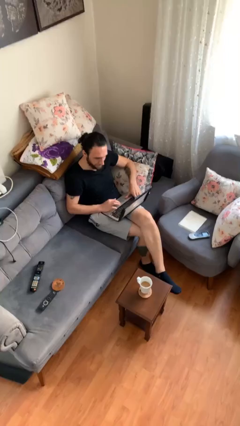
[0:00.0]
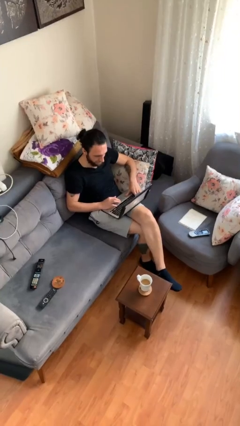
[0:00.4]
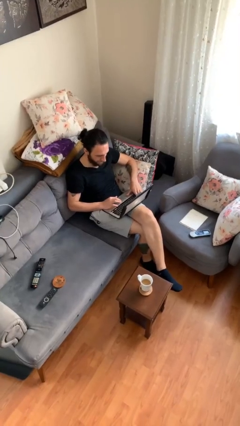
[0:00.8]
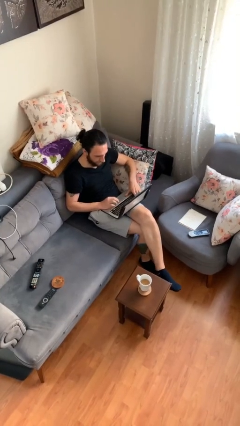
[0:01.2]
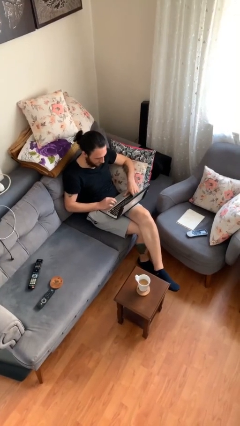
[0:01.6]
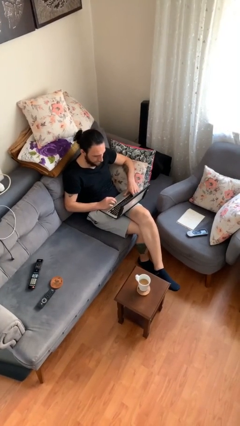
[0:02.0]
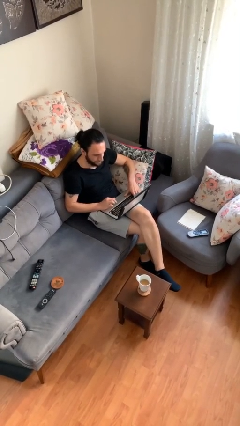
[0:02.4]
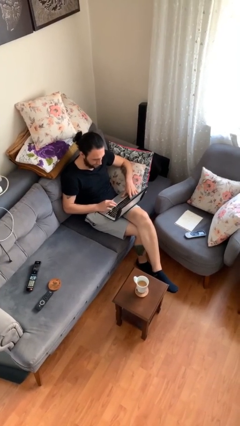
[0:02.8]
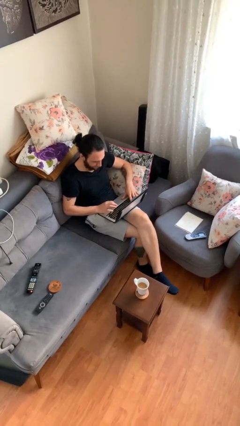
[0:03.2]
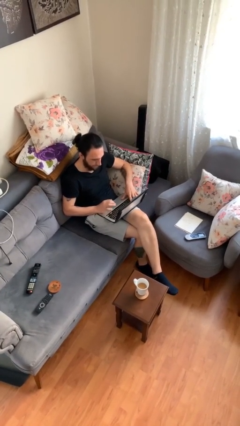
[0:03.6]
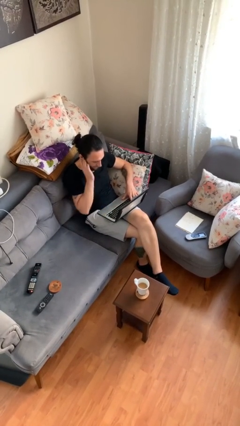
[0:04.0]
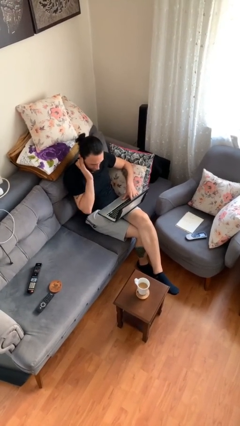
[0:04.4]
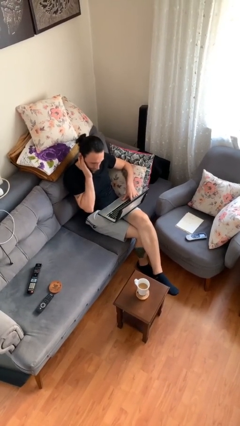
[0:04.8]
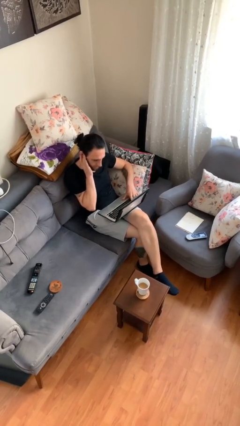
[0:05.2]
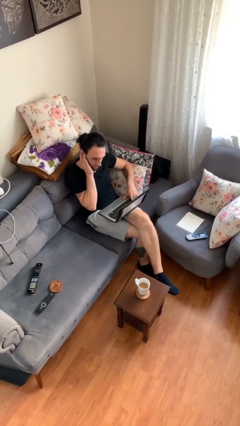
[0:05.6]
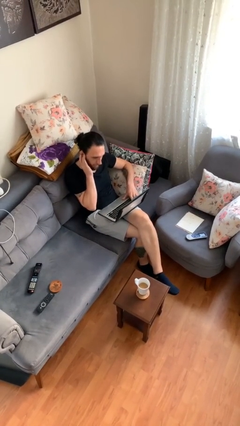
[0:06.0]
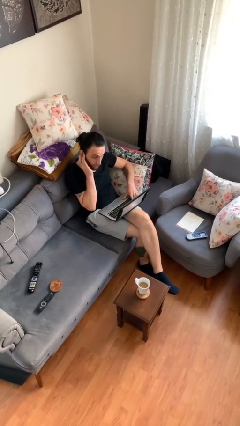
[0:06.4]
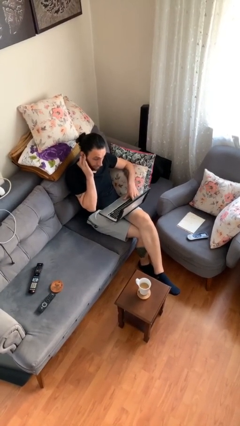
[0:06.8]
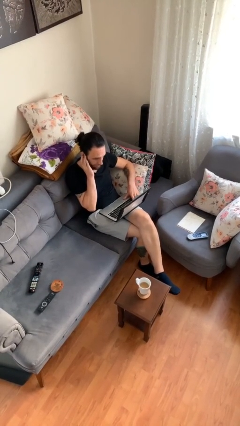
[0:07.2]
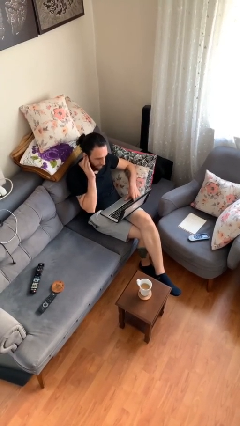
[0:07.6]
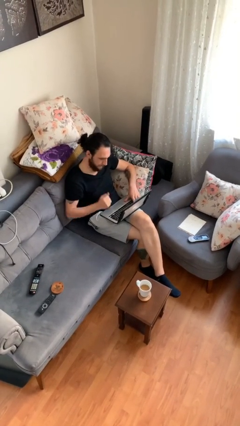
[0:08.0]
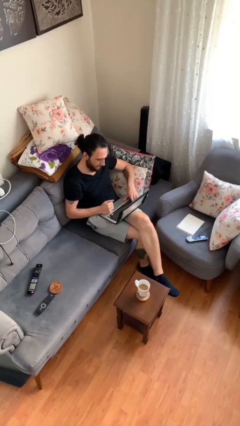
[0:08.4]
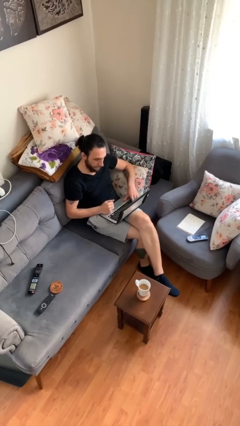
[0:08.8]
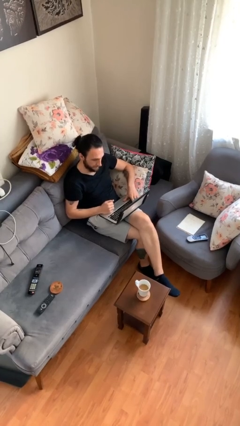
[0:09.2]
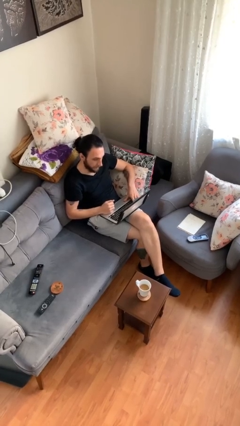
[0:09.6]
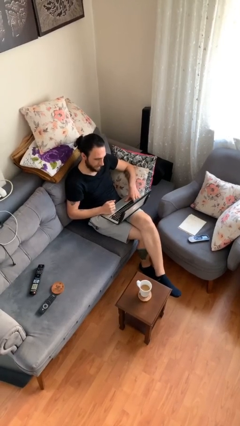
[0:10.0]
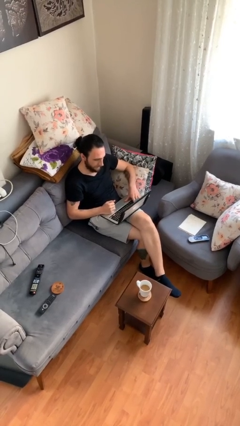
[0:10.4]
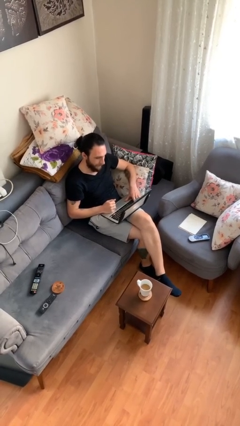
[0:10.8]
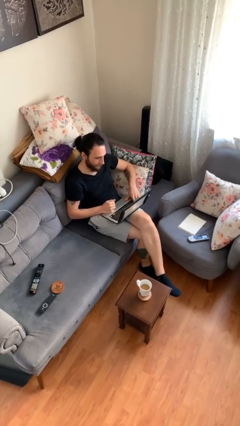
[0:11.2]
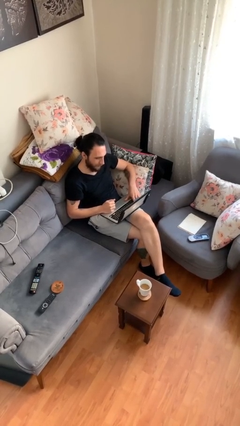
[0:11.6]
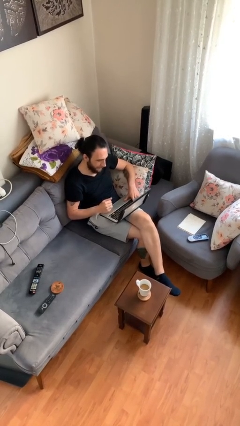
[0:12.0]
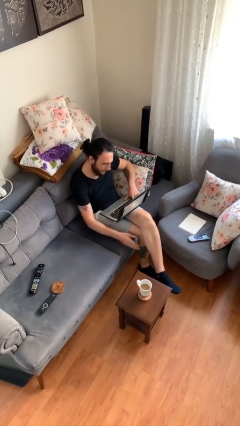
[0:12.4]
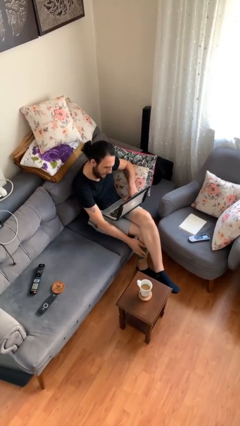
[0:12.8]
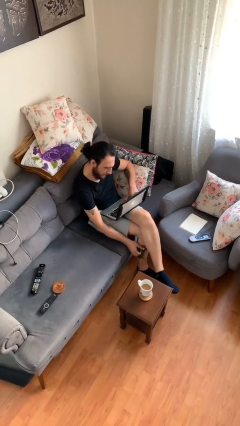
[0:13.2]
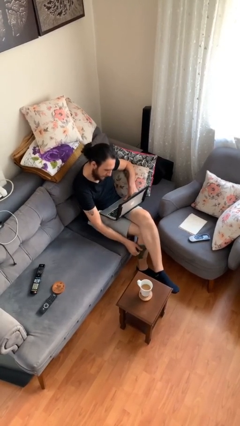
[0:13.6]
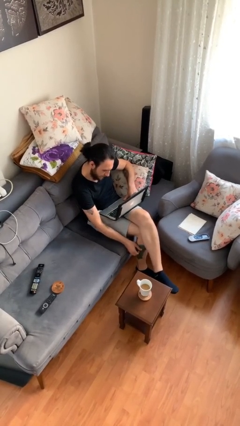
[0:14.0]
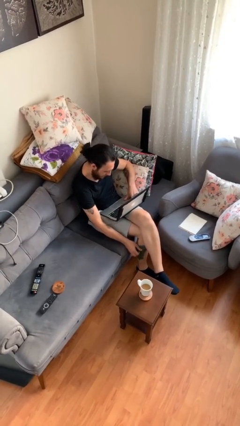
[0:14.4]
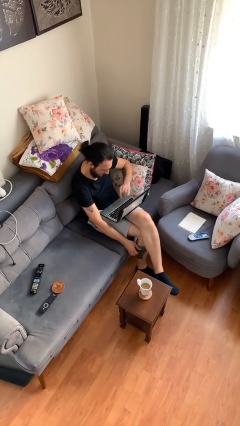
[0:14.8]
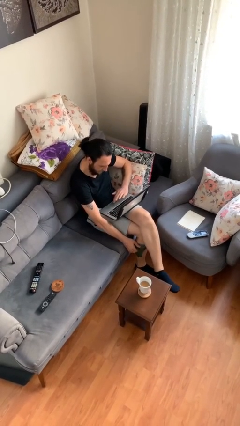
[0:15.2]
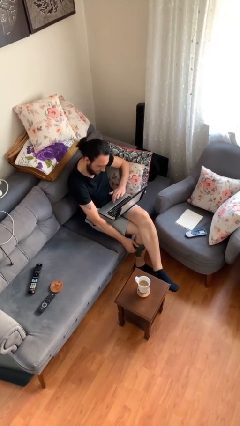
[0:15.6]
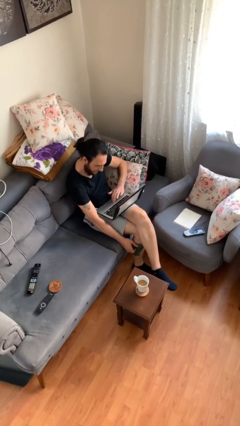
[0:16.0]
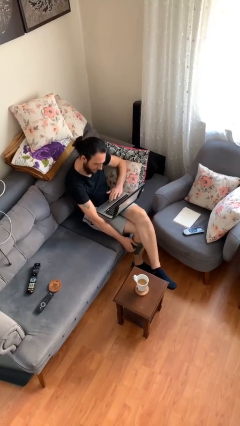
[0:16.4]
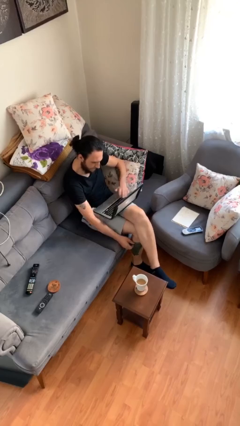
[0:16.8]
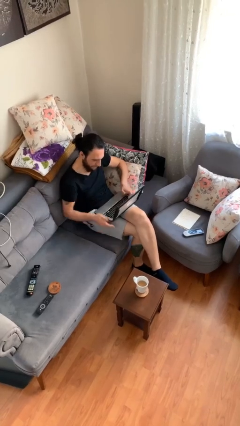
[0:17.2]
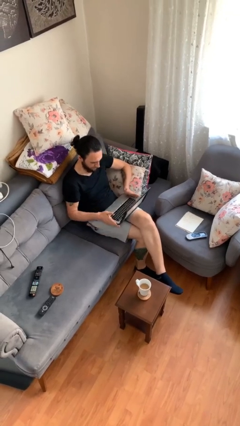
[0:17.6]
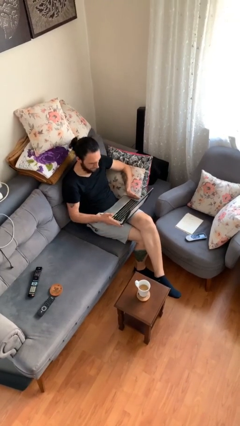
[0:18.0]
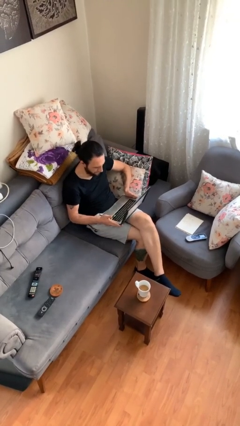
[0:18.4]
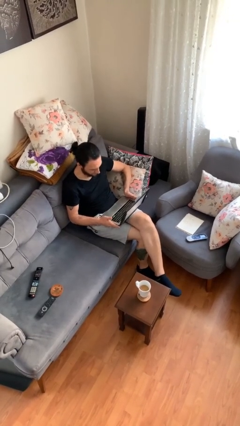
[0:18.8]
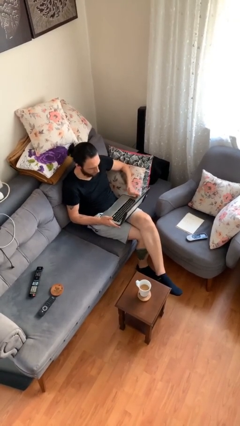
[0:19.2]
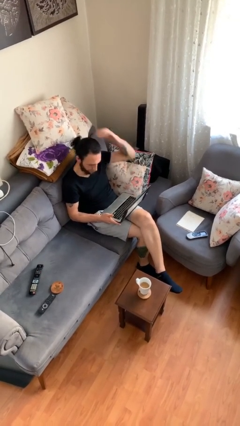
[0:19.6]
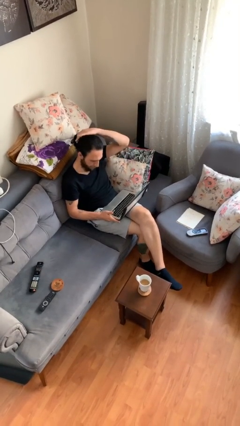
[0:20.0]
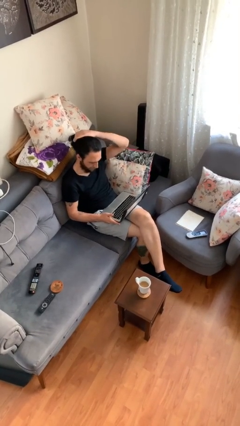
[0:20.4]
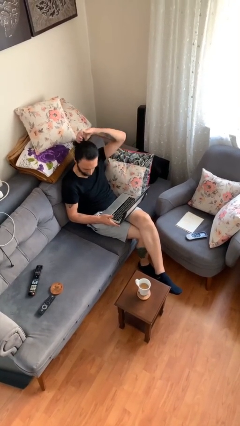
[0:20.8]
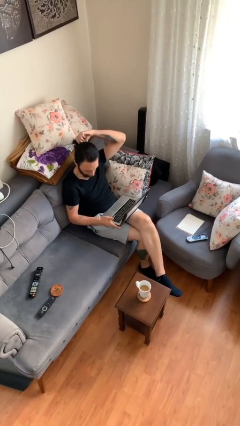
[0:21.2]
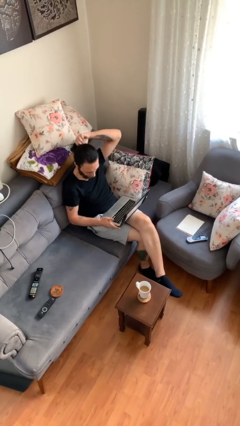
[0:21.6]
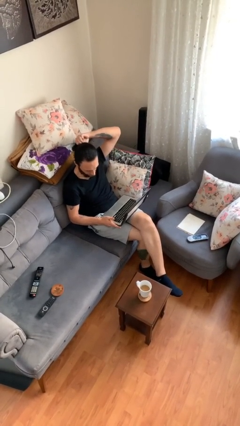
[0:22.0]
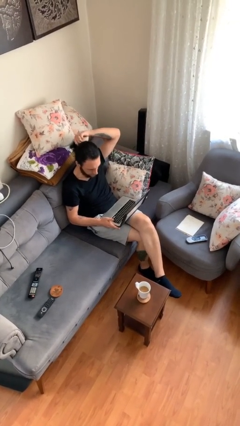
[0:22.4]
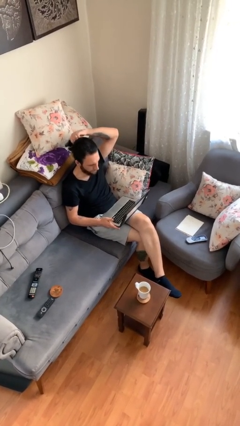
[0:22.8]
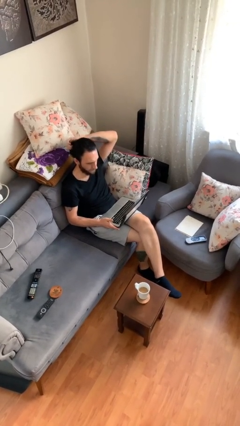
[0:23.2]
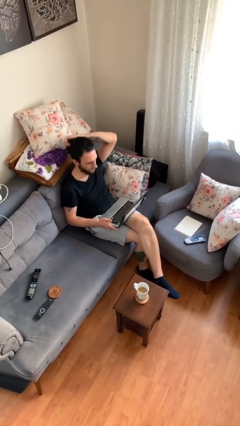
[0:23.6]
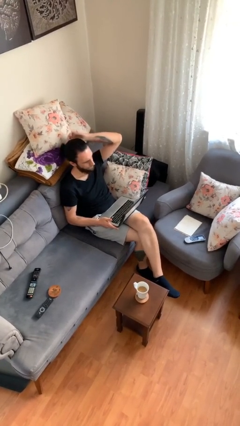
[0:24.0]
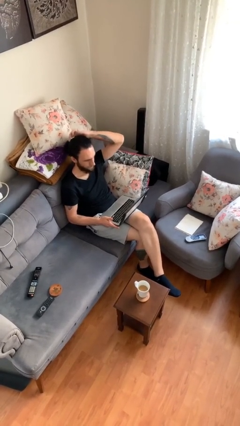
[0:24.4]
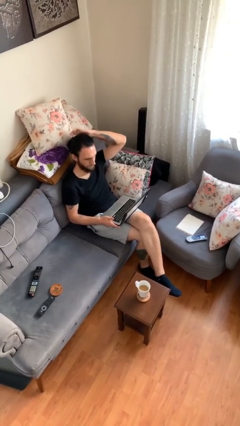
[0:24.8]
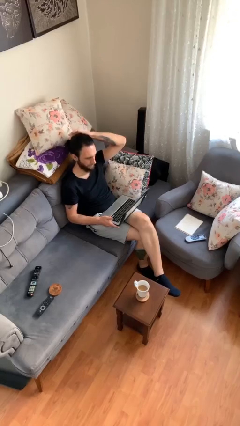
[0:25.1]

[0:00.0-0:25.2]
person interacts with laptop

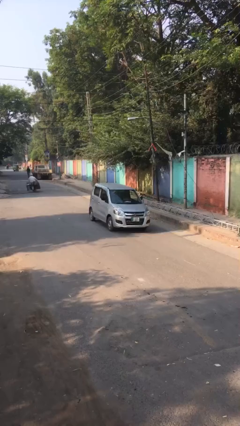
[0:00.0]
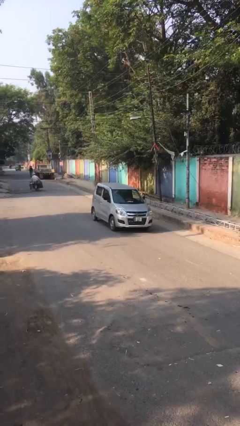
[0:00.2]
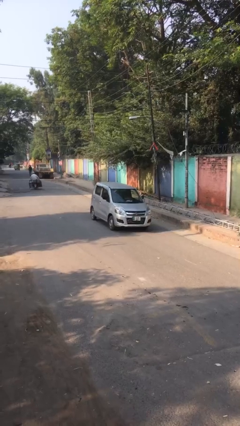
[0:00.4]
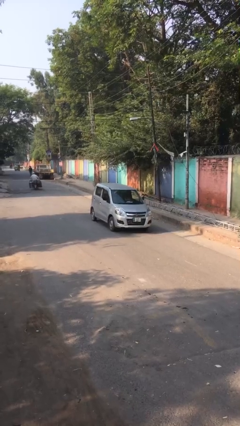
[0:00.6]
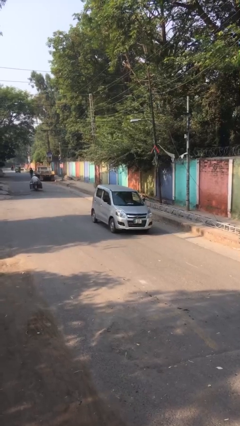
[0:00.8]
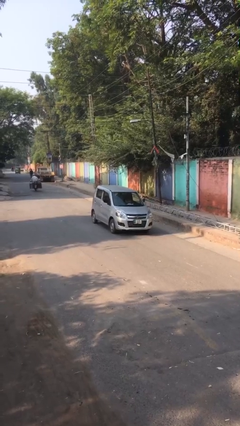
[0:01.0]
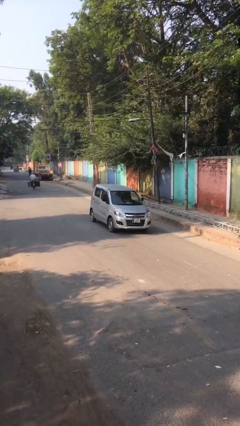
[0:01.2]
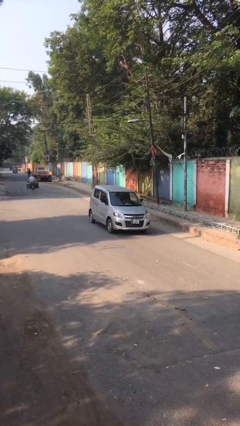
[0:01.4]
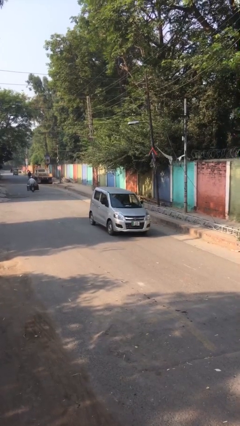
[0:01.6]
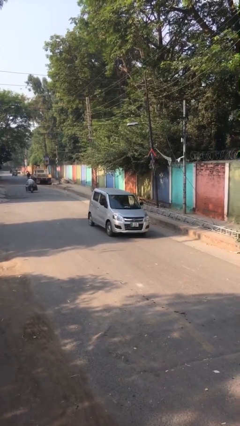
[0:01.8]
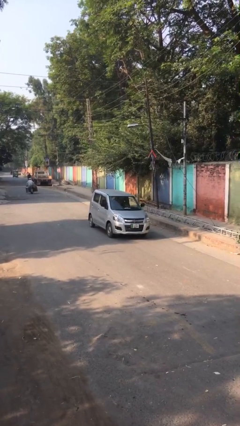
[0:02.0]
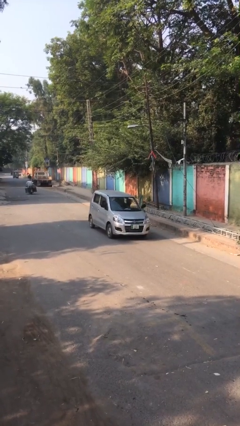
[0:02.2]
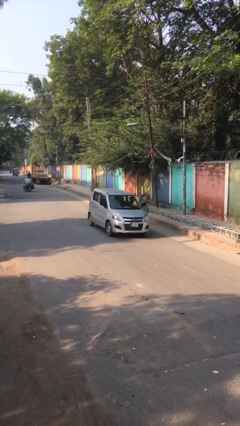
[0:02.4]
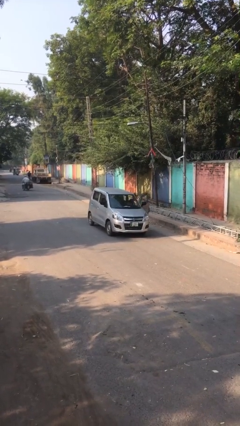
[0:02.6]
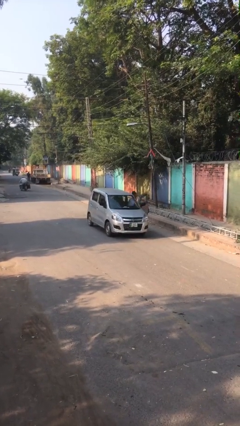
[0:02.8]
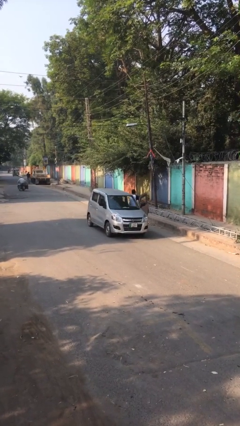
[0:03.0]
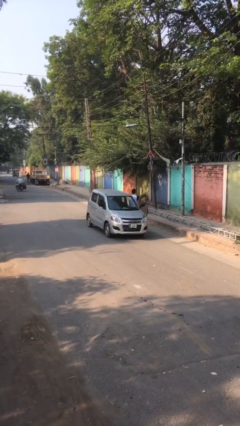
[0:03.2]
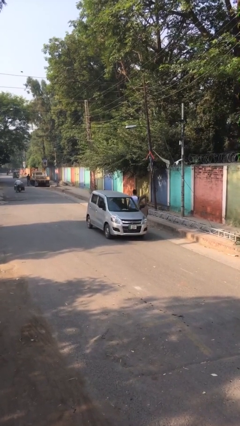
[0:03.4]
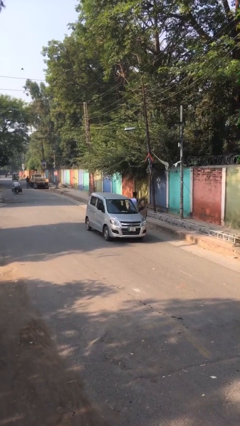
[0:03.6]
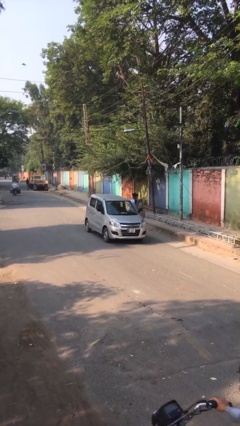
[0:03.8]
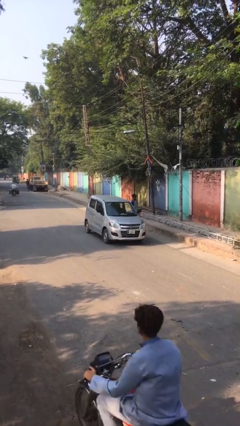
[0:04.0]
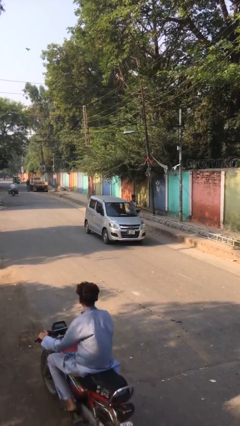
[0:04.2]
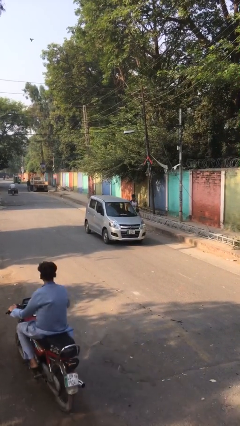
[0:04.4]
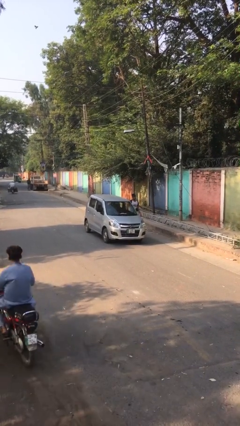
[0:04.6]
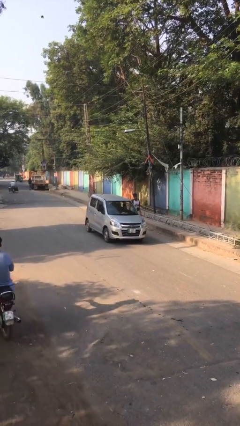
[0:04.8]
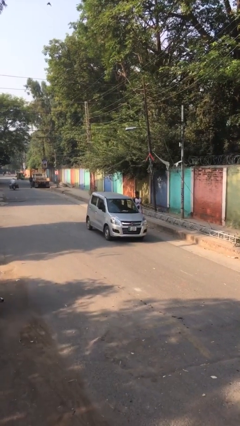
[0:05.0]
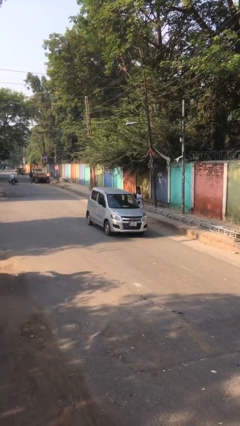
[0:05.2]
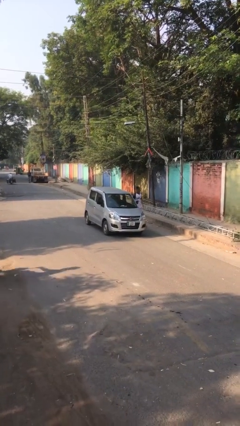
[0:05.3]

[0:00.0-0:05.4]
car drops off person

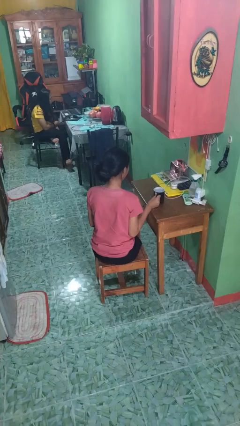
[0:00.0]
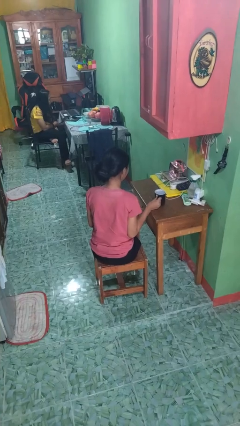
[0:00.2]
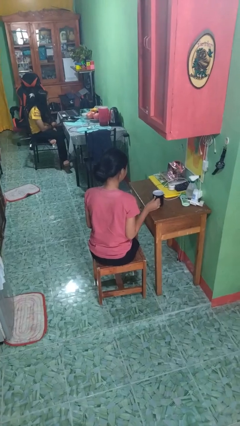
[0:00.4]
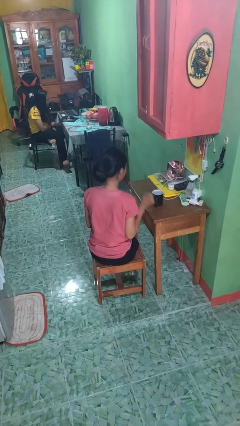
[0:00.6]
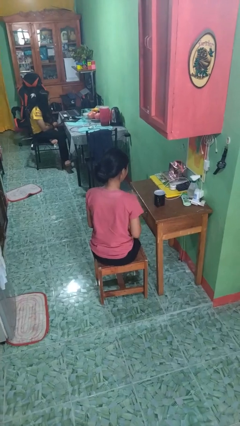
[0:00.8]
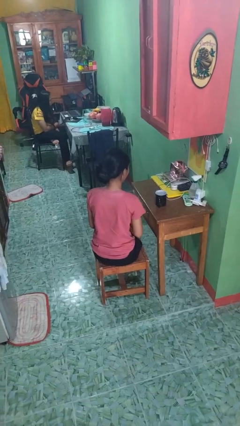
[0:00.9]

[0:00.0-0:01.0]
person puts down object on table
